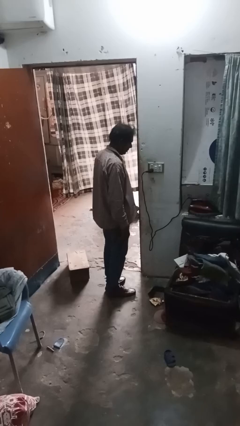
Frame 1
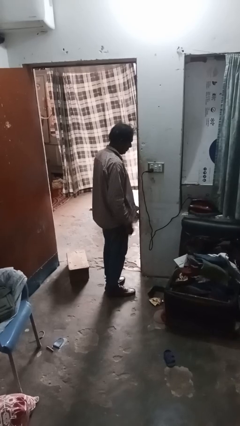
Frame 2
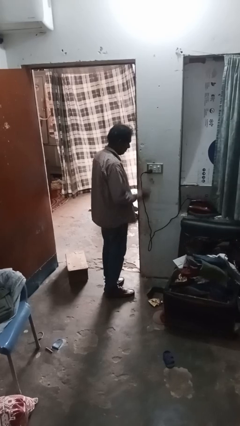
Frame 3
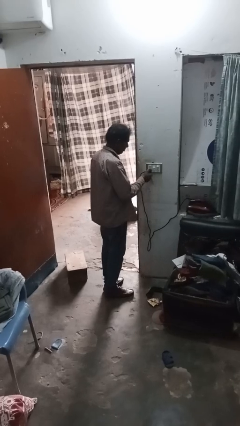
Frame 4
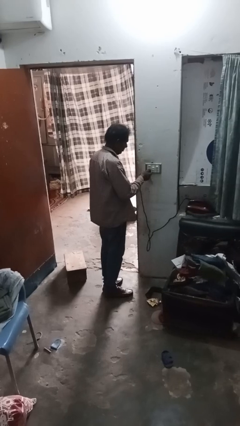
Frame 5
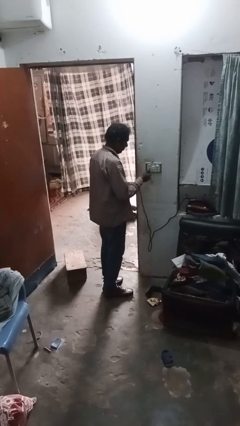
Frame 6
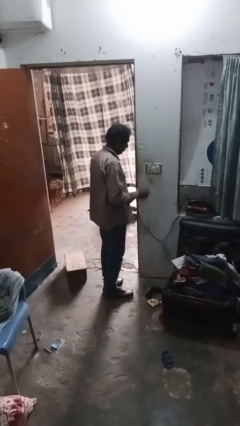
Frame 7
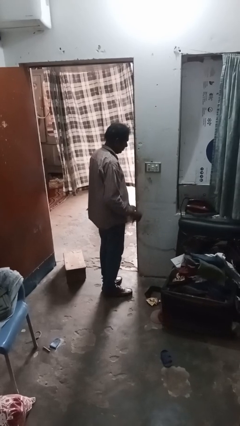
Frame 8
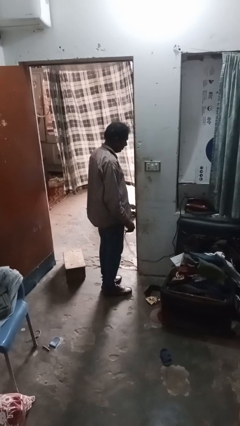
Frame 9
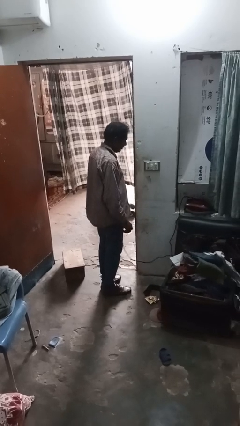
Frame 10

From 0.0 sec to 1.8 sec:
person unplugs from electrical socket

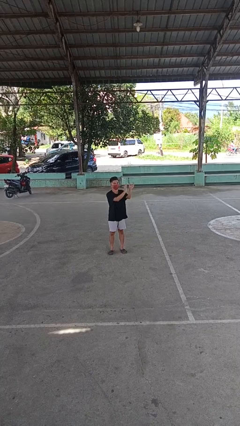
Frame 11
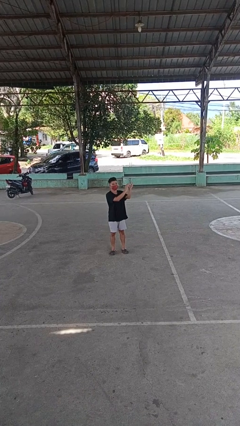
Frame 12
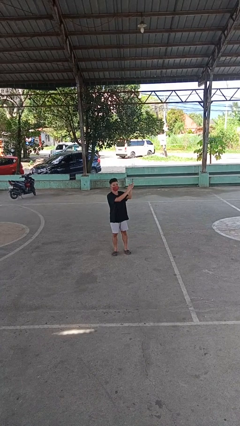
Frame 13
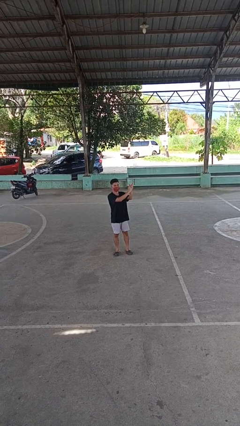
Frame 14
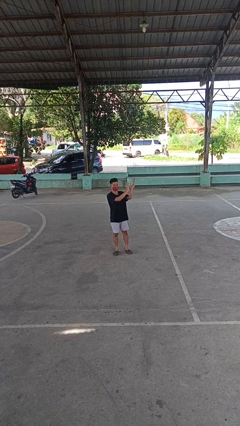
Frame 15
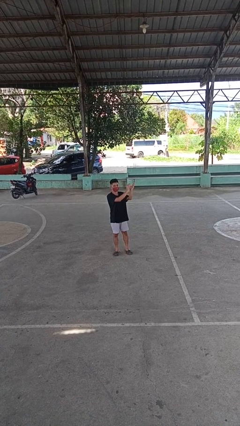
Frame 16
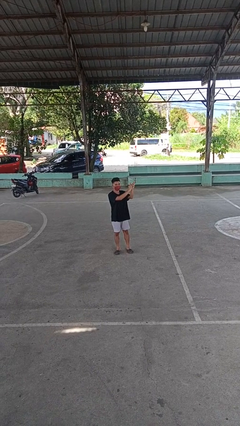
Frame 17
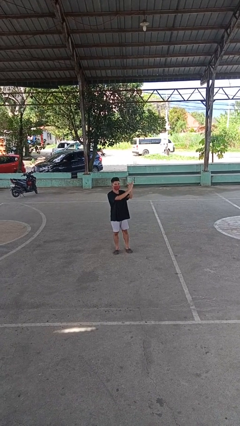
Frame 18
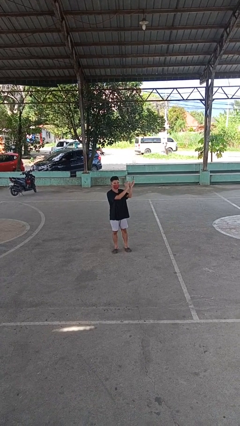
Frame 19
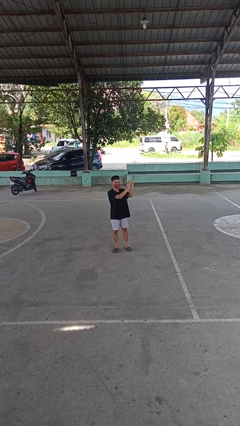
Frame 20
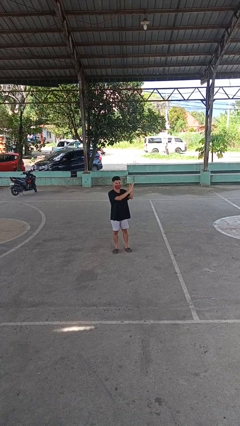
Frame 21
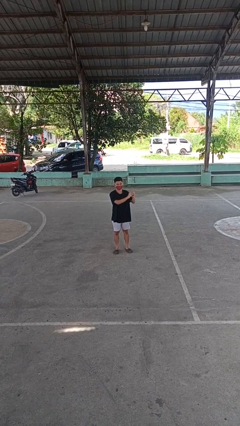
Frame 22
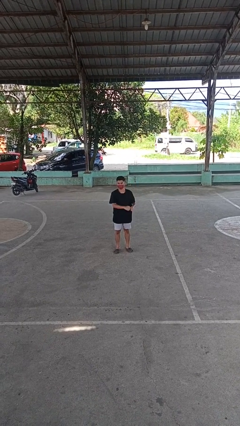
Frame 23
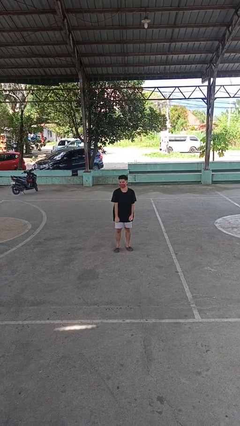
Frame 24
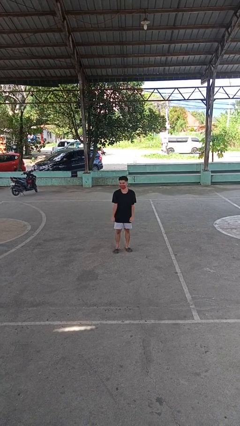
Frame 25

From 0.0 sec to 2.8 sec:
person claps hands

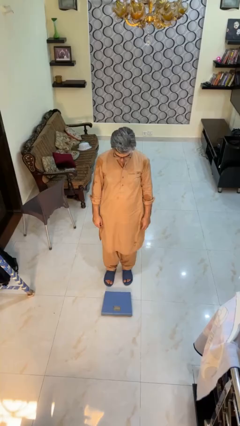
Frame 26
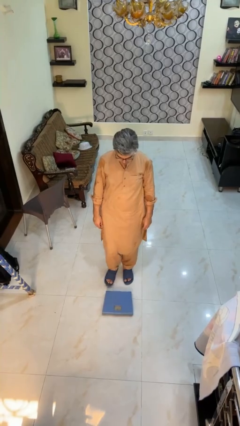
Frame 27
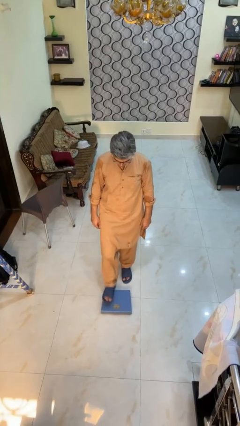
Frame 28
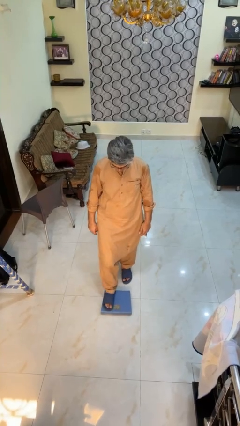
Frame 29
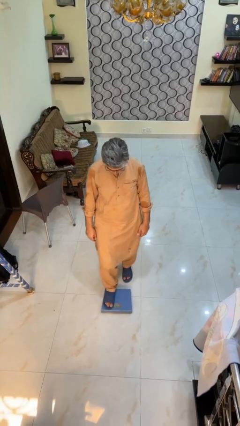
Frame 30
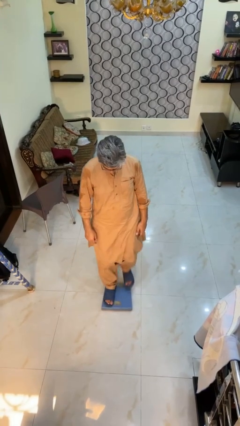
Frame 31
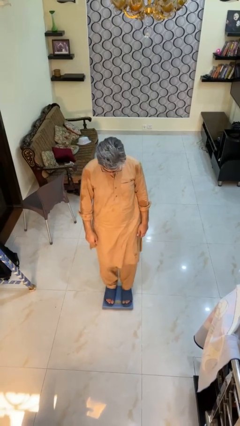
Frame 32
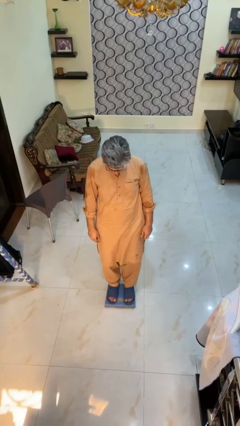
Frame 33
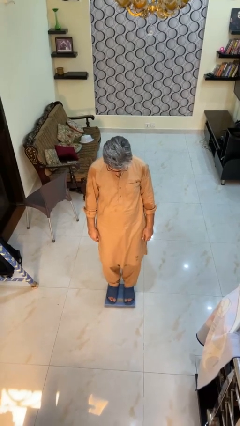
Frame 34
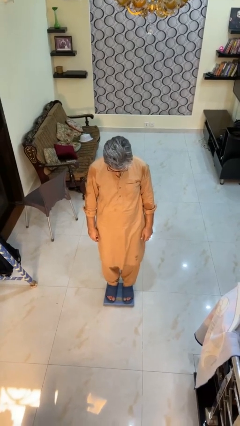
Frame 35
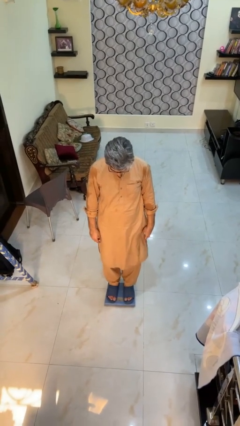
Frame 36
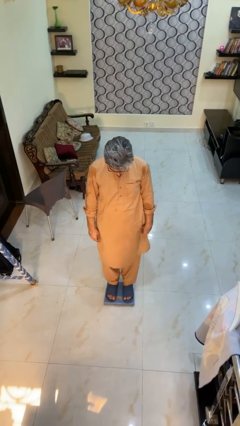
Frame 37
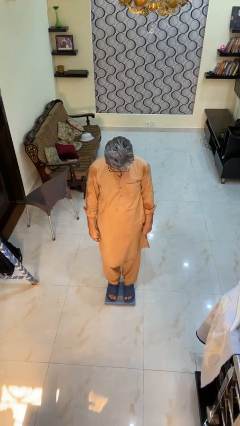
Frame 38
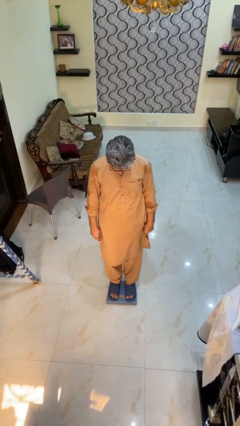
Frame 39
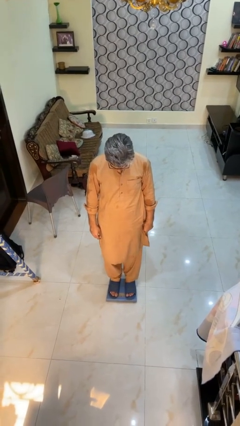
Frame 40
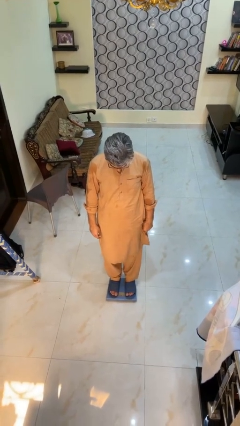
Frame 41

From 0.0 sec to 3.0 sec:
person uses bodyweight scale

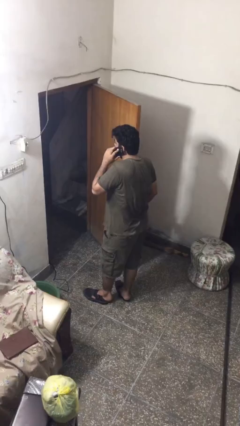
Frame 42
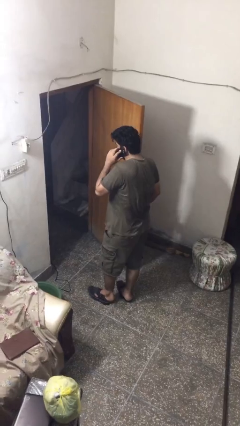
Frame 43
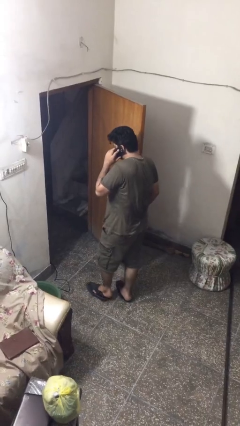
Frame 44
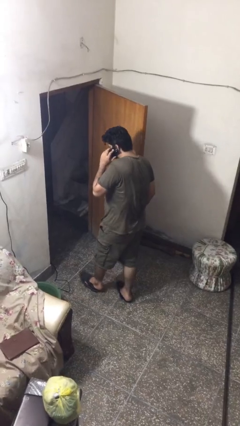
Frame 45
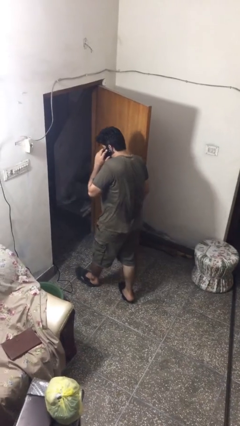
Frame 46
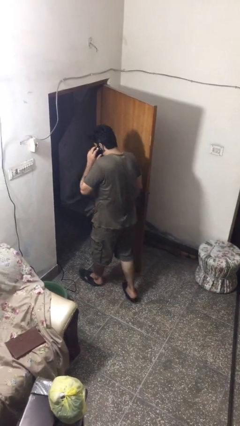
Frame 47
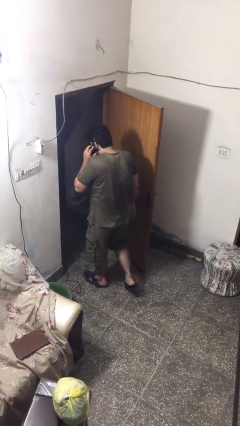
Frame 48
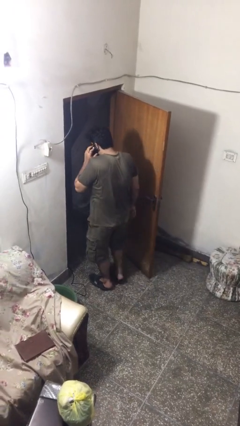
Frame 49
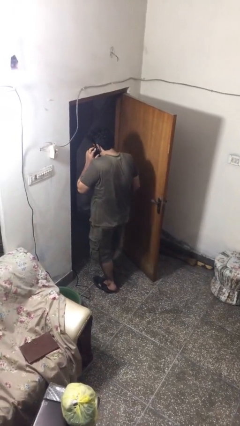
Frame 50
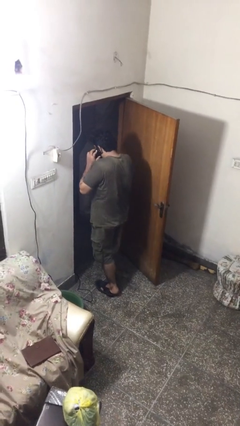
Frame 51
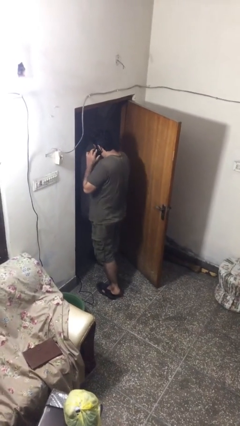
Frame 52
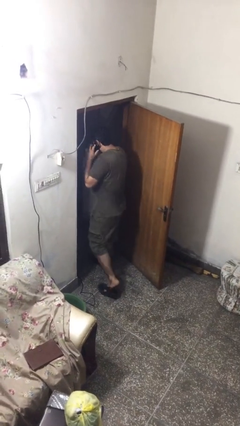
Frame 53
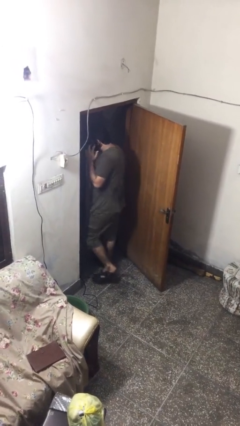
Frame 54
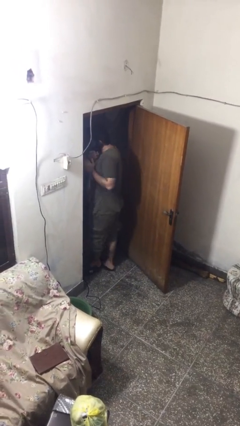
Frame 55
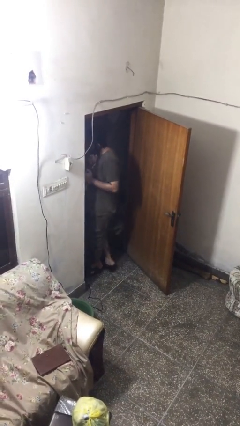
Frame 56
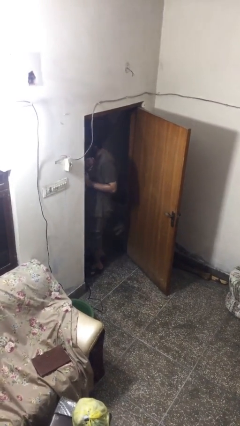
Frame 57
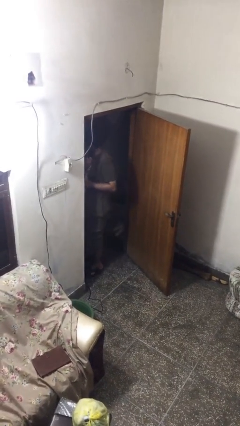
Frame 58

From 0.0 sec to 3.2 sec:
person exits scene through structure

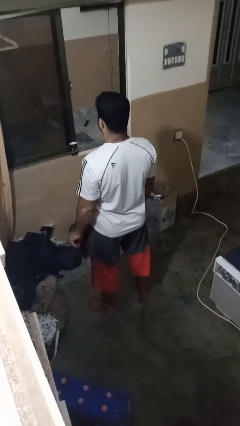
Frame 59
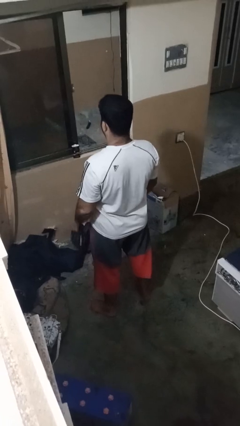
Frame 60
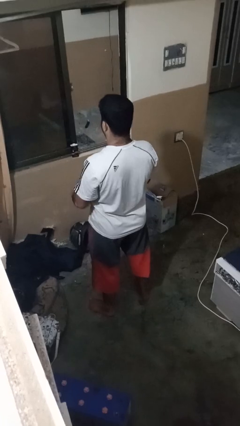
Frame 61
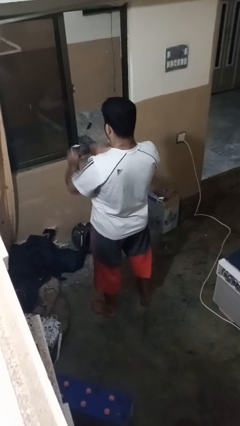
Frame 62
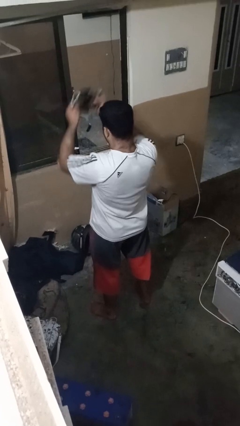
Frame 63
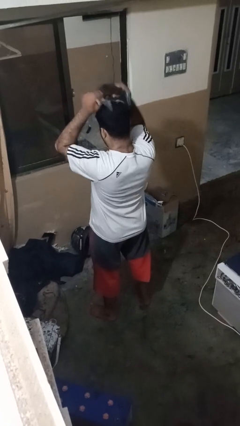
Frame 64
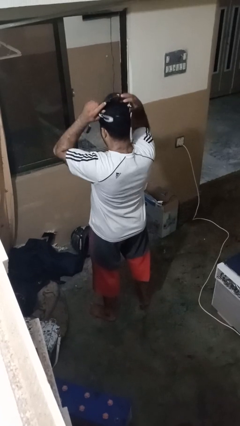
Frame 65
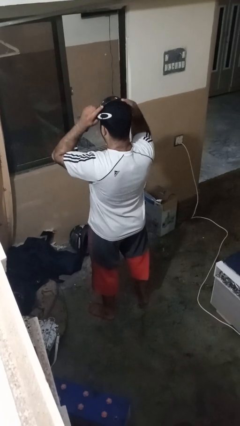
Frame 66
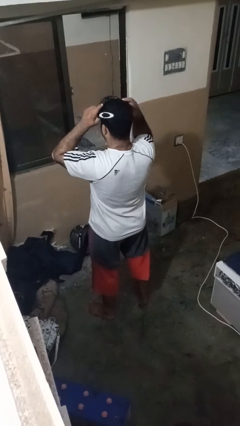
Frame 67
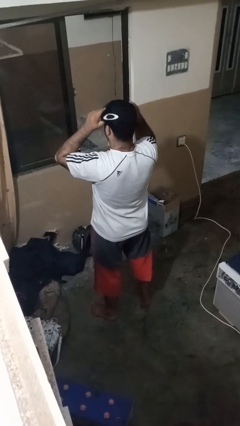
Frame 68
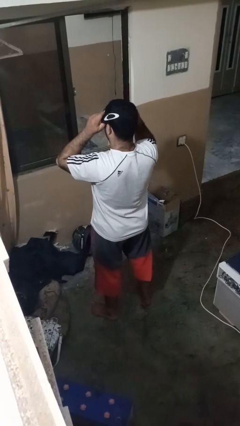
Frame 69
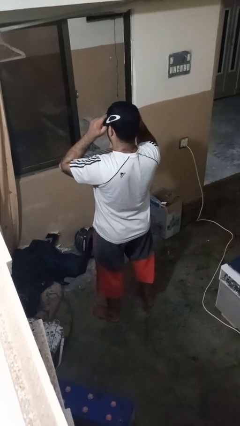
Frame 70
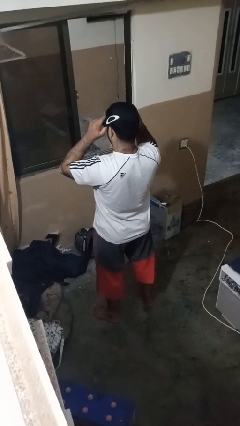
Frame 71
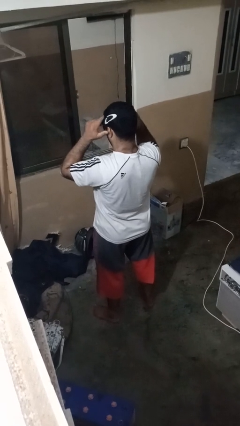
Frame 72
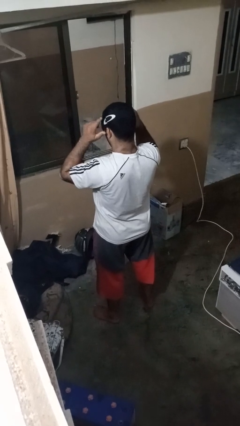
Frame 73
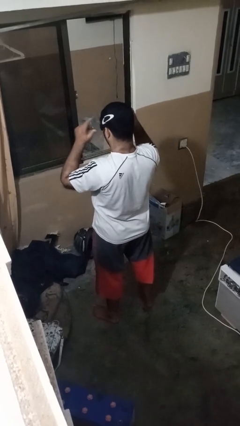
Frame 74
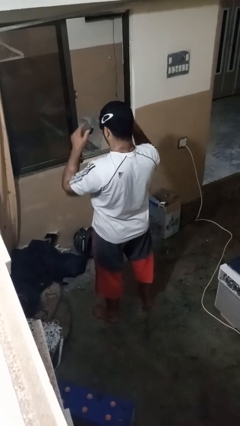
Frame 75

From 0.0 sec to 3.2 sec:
person puts on sunglasses

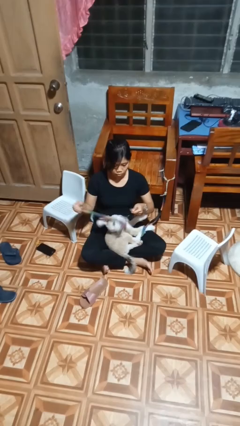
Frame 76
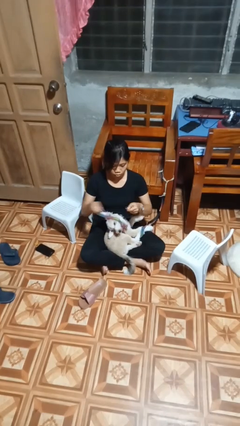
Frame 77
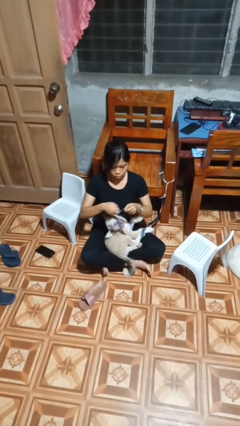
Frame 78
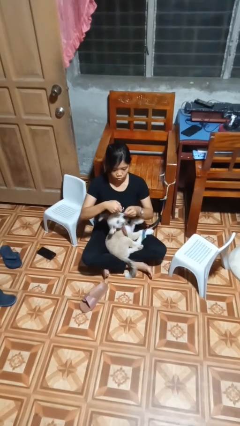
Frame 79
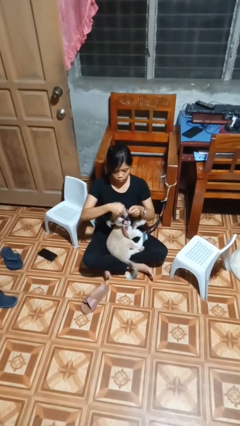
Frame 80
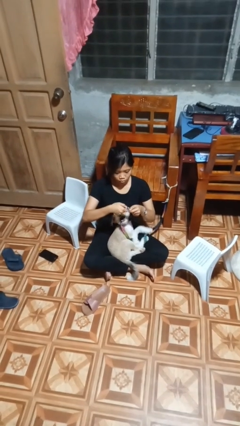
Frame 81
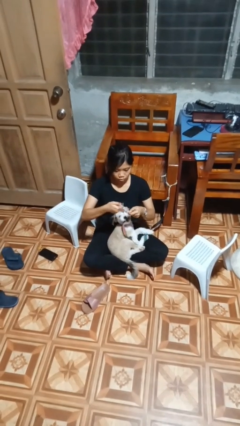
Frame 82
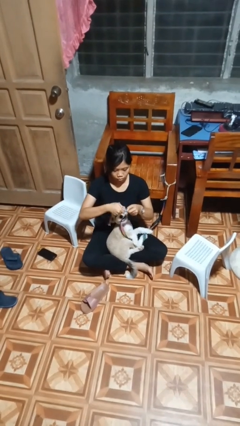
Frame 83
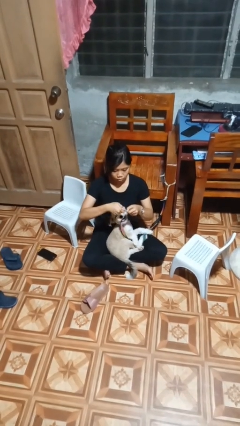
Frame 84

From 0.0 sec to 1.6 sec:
person attaches leash to dog

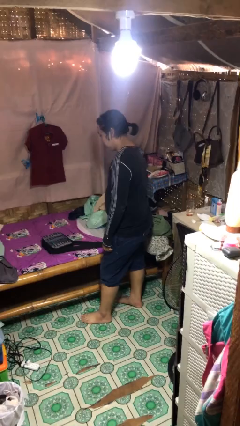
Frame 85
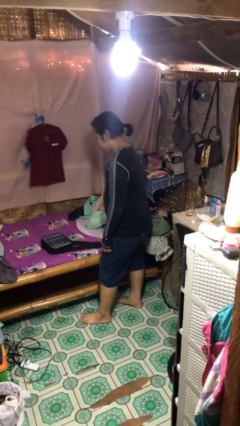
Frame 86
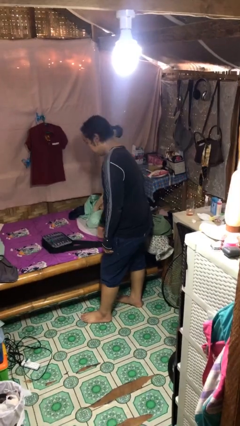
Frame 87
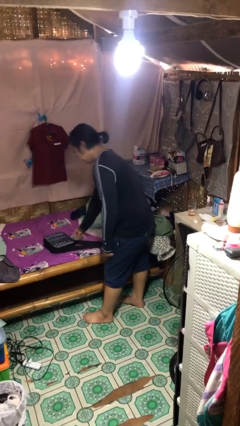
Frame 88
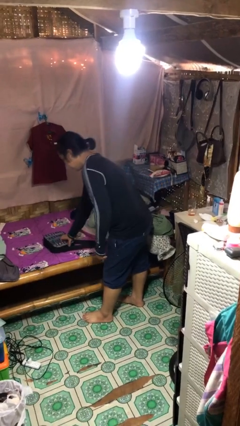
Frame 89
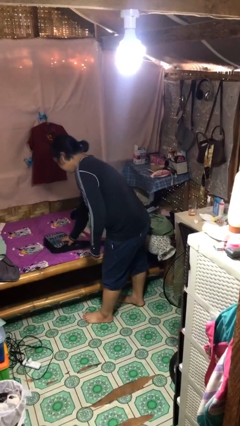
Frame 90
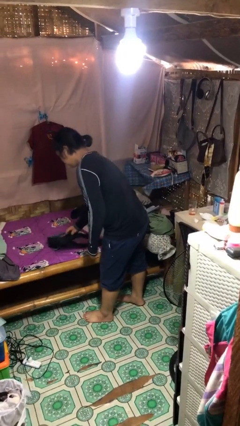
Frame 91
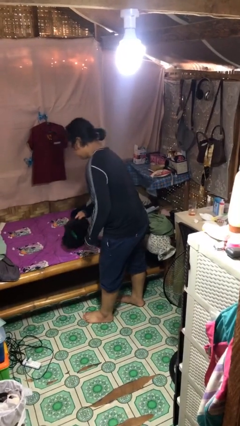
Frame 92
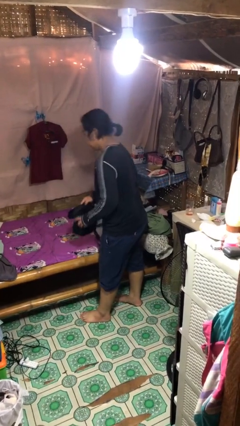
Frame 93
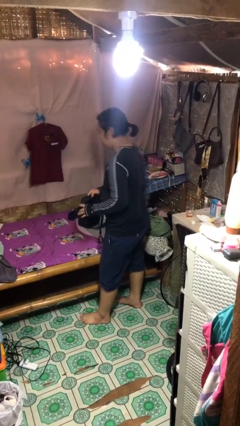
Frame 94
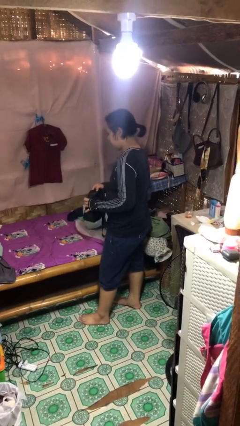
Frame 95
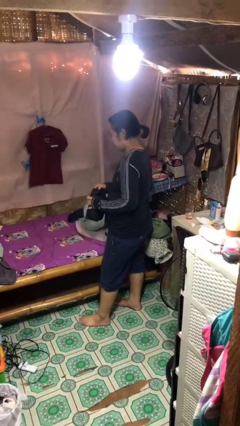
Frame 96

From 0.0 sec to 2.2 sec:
person picks up object from bed
